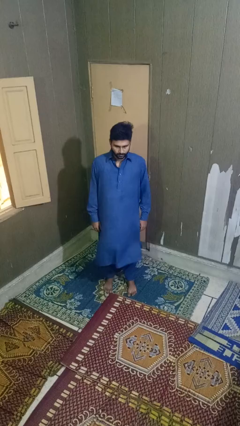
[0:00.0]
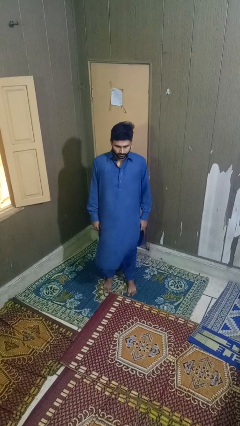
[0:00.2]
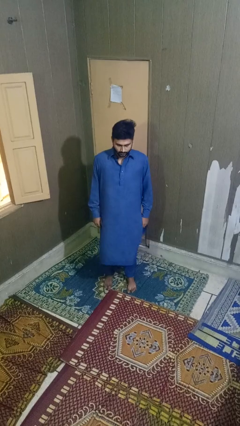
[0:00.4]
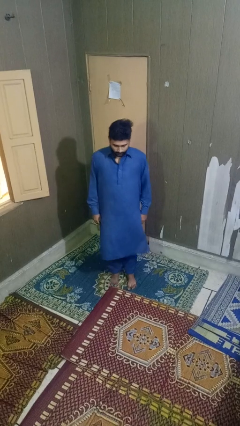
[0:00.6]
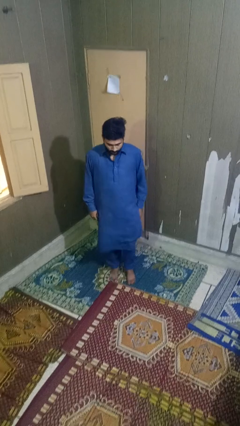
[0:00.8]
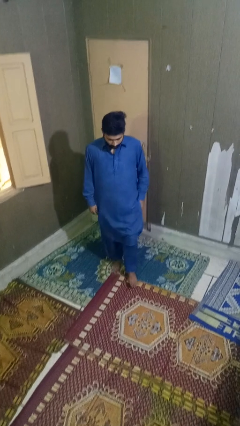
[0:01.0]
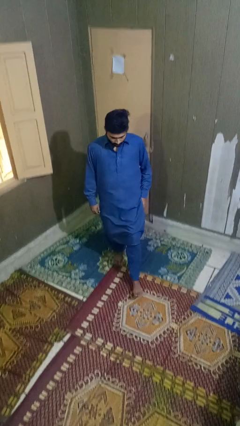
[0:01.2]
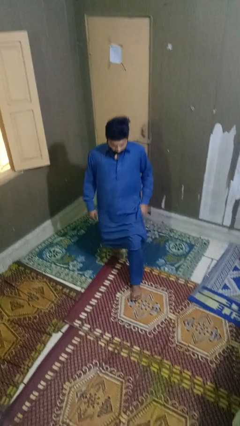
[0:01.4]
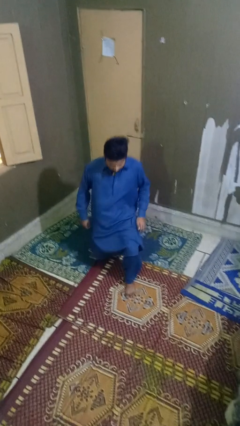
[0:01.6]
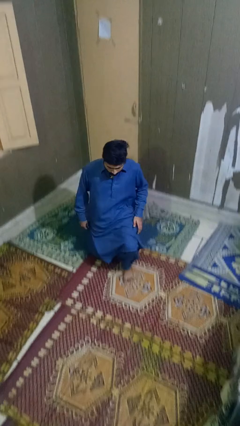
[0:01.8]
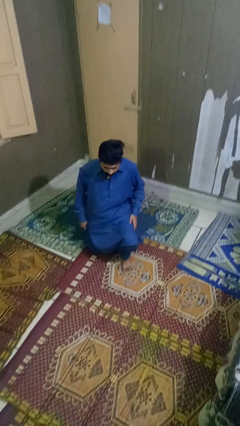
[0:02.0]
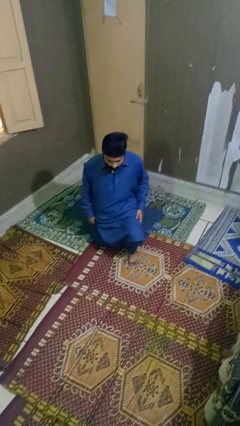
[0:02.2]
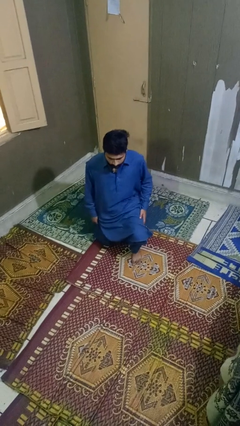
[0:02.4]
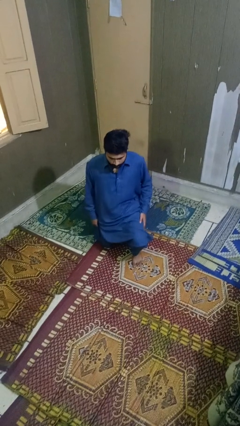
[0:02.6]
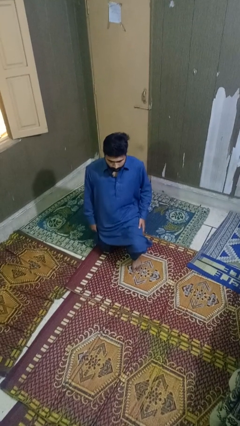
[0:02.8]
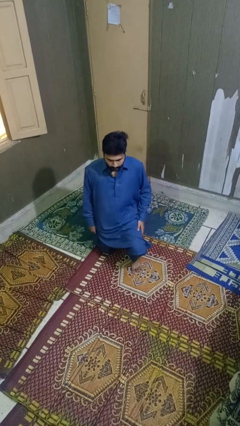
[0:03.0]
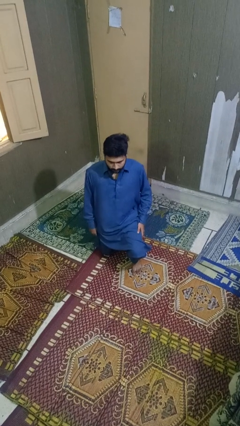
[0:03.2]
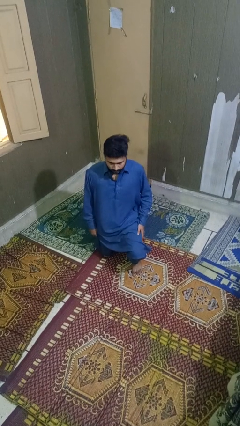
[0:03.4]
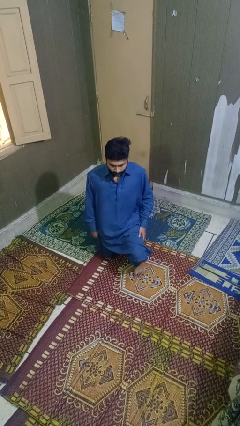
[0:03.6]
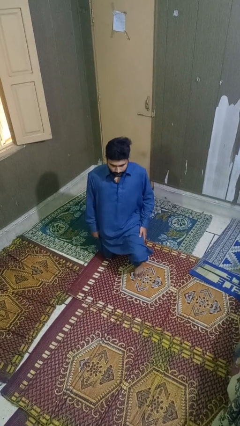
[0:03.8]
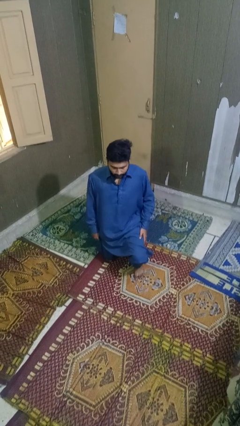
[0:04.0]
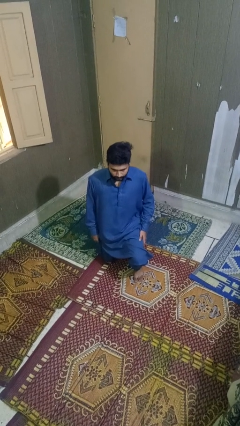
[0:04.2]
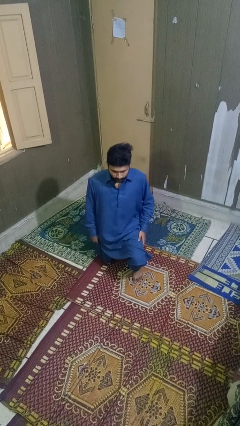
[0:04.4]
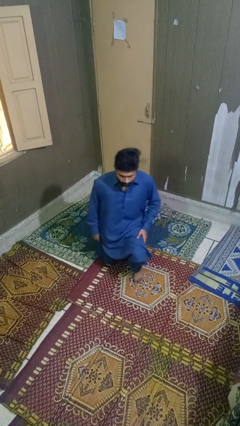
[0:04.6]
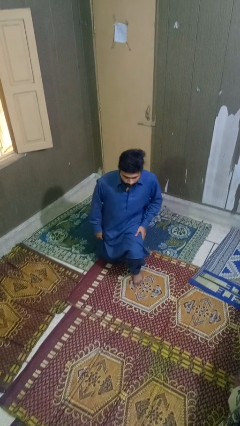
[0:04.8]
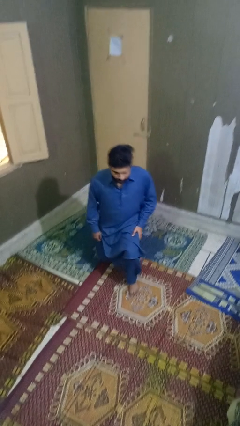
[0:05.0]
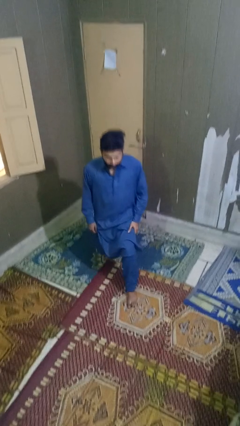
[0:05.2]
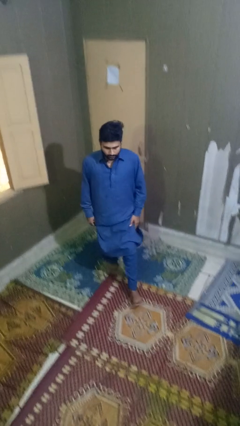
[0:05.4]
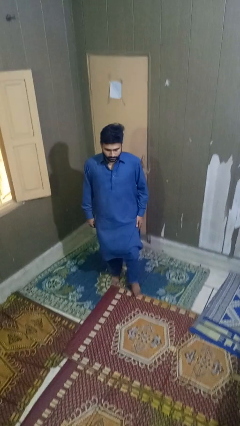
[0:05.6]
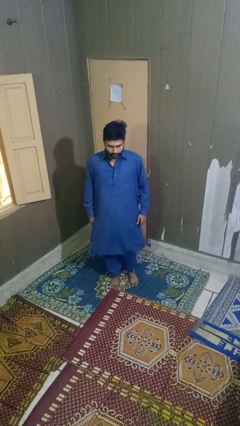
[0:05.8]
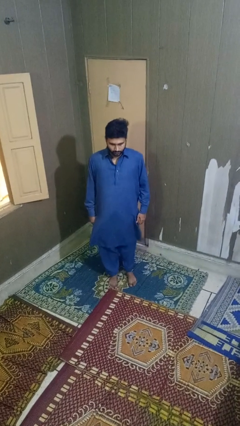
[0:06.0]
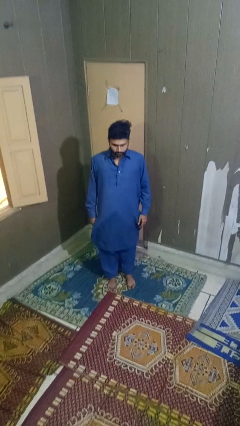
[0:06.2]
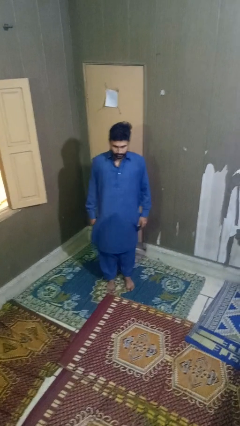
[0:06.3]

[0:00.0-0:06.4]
person exercises with lunges

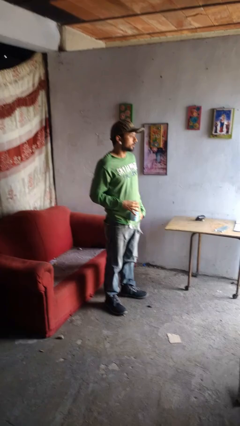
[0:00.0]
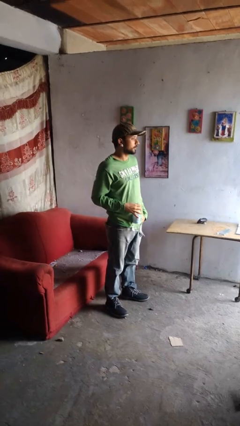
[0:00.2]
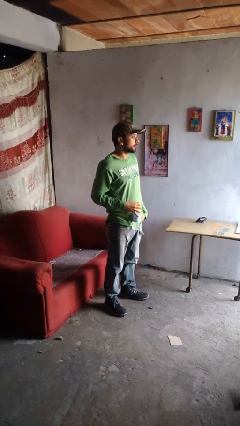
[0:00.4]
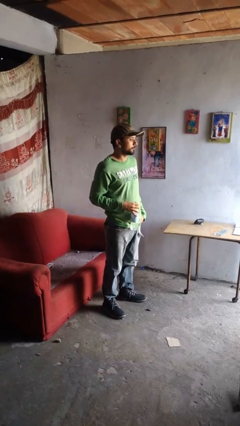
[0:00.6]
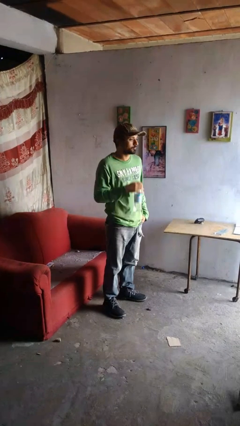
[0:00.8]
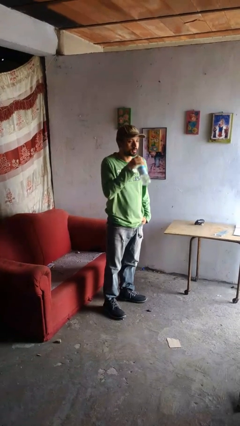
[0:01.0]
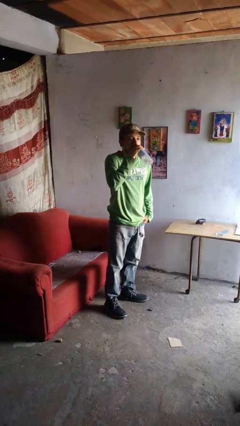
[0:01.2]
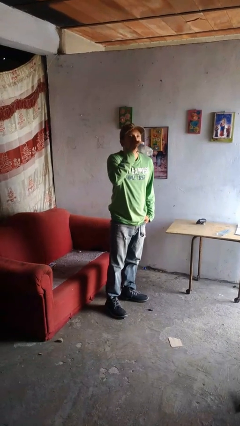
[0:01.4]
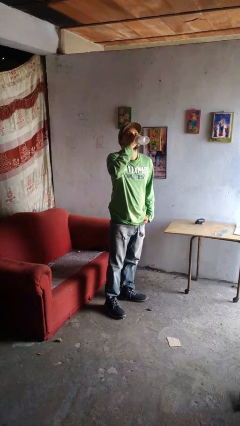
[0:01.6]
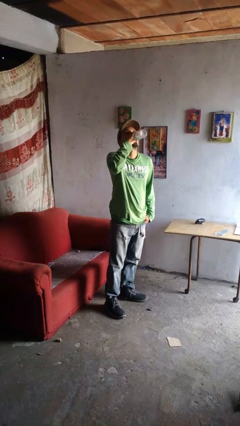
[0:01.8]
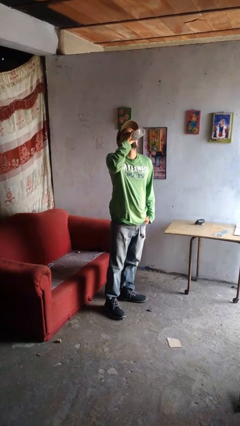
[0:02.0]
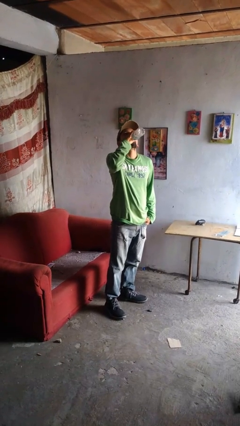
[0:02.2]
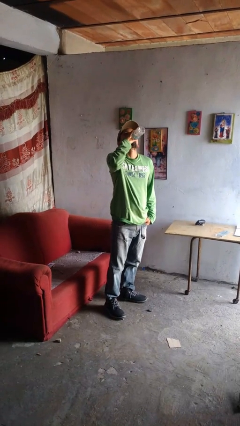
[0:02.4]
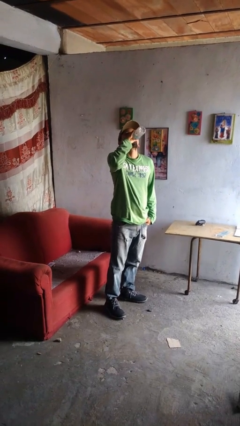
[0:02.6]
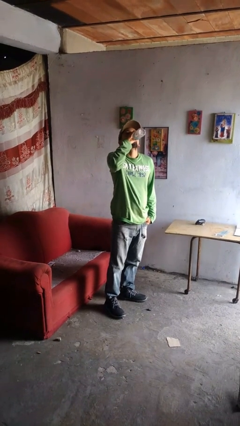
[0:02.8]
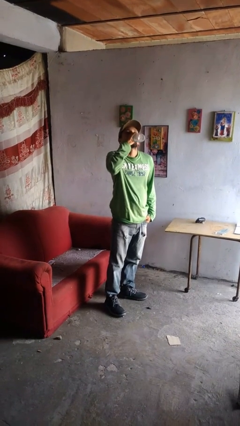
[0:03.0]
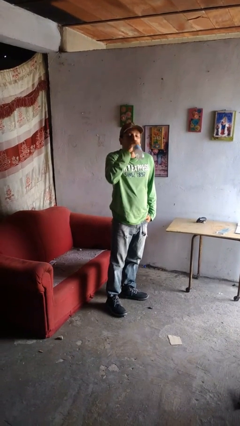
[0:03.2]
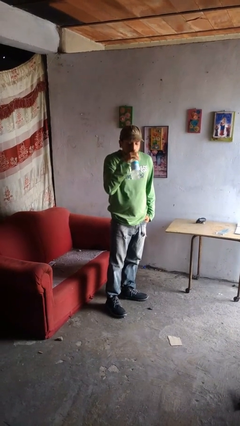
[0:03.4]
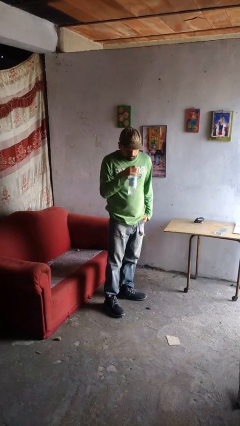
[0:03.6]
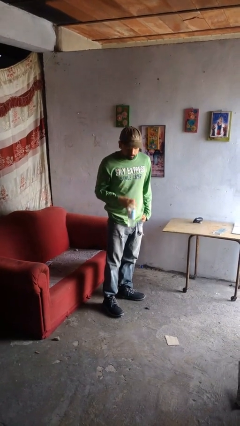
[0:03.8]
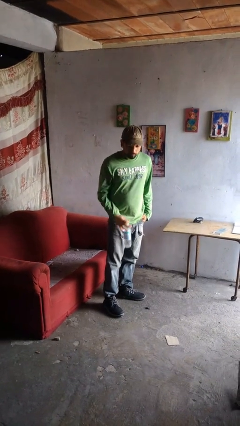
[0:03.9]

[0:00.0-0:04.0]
person drinks from bottle

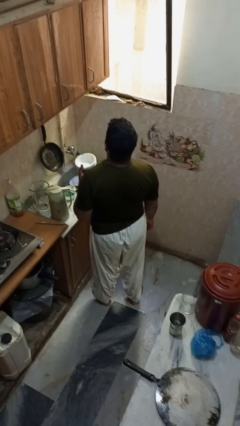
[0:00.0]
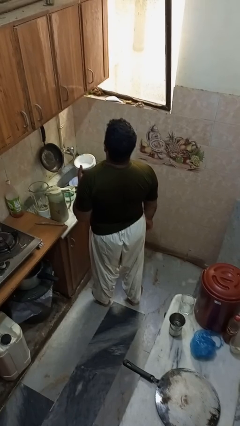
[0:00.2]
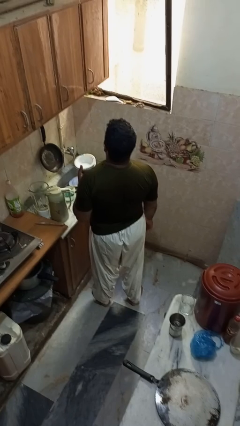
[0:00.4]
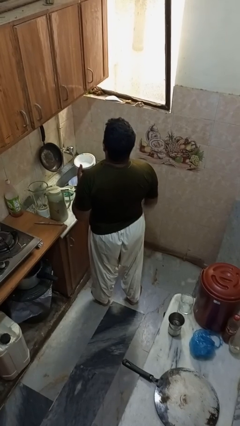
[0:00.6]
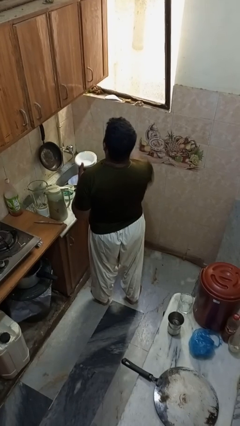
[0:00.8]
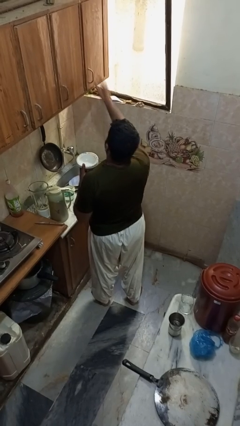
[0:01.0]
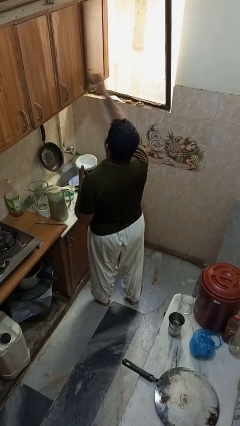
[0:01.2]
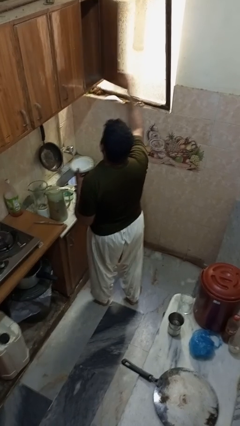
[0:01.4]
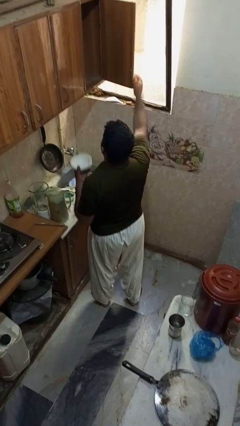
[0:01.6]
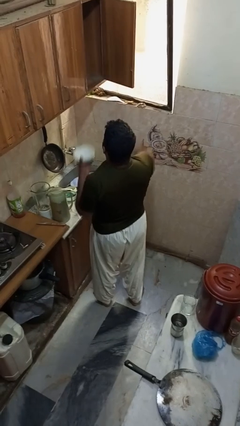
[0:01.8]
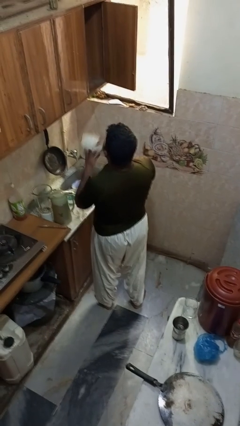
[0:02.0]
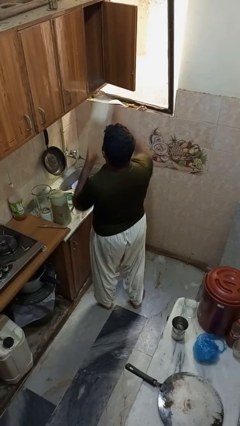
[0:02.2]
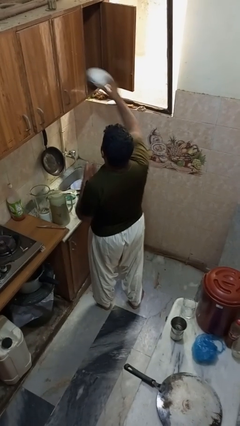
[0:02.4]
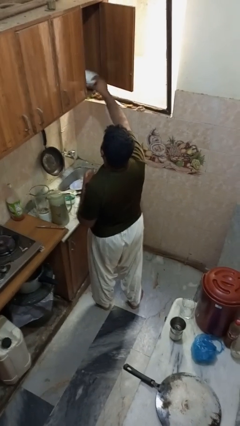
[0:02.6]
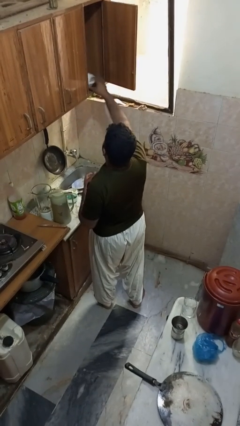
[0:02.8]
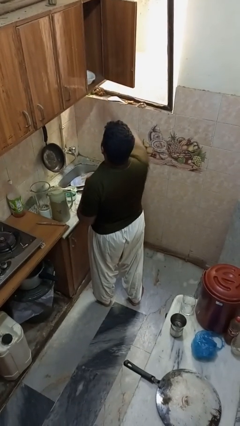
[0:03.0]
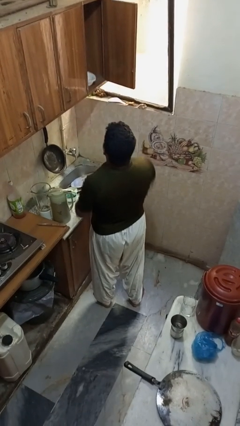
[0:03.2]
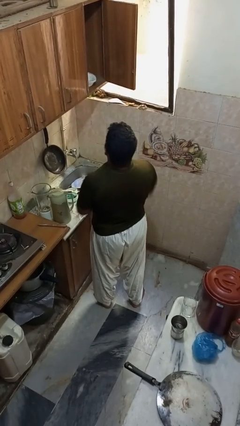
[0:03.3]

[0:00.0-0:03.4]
person puts object in cabinet

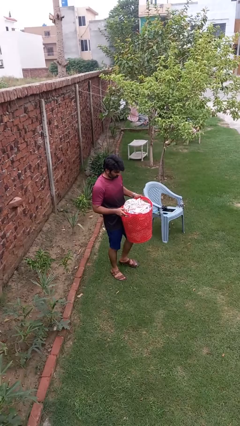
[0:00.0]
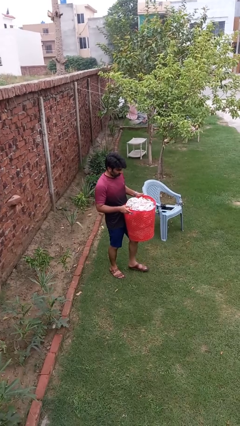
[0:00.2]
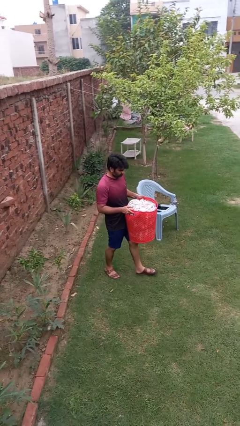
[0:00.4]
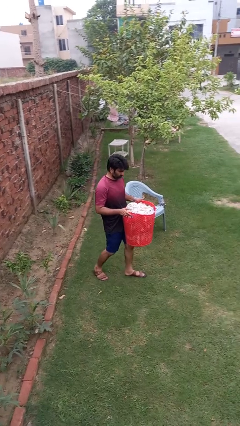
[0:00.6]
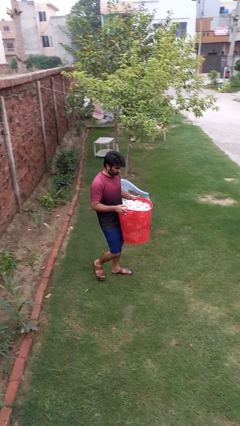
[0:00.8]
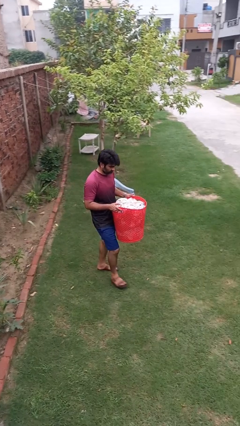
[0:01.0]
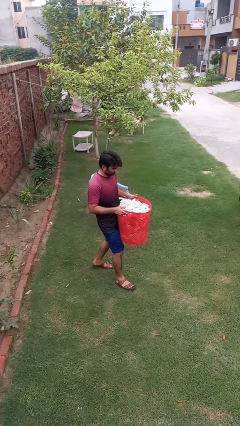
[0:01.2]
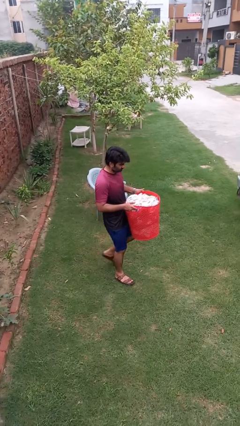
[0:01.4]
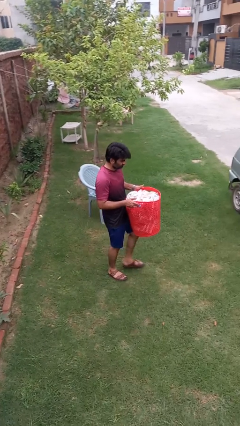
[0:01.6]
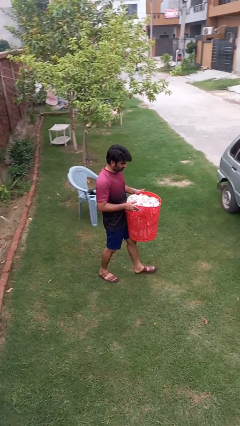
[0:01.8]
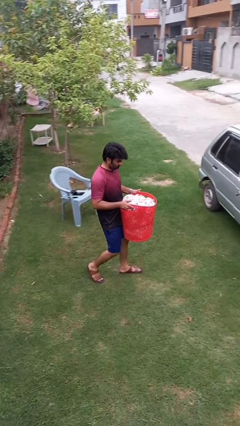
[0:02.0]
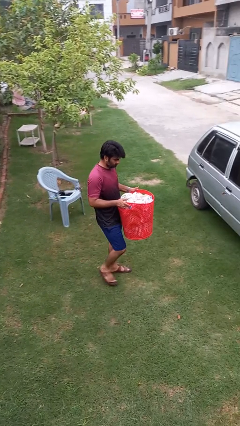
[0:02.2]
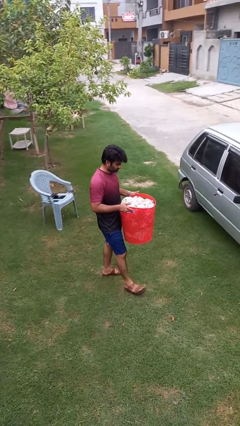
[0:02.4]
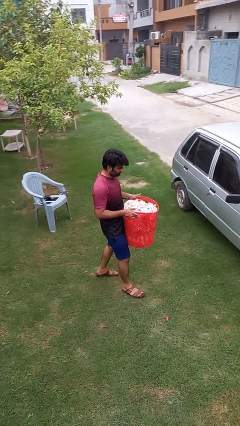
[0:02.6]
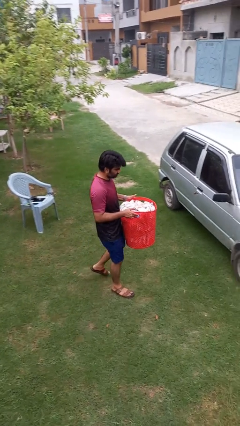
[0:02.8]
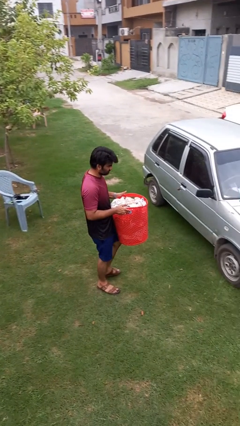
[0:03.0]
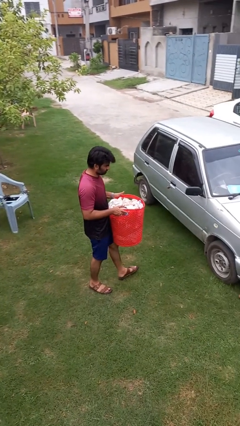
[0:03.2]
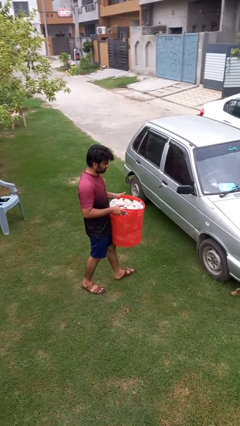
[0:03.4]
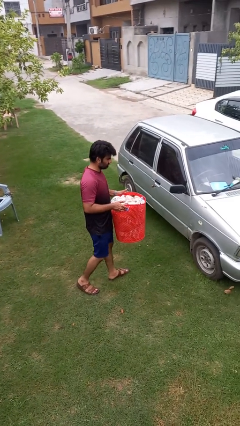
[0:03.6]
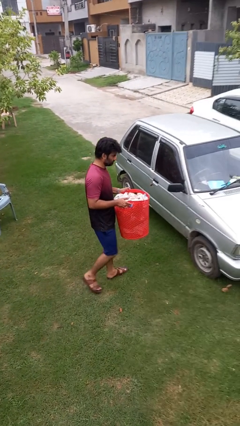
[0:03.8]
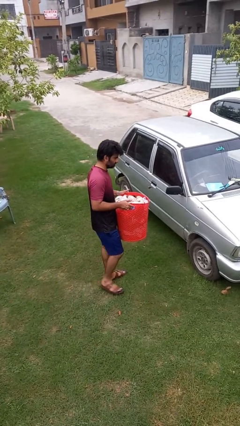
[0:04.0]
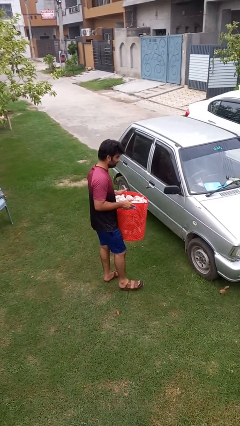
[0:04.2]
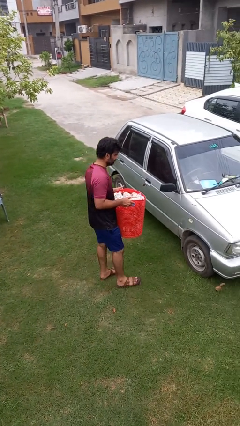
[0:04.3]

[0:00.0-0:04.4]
person carries laundry basket
